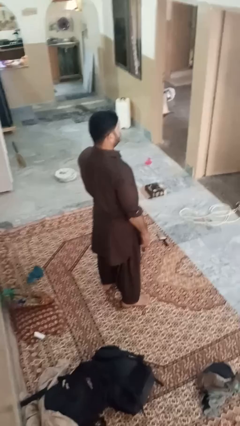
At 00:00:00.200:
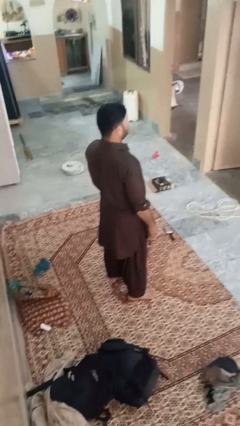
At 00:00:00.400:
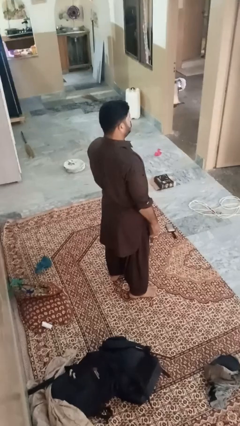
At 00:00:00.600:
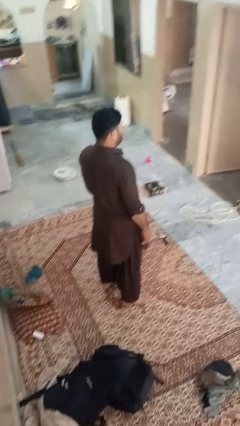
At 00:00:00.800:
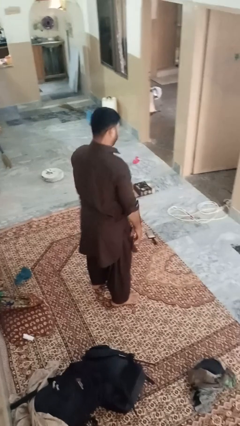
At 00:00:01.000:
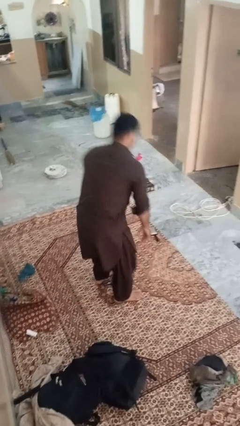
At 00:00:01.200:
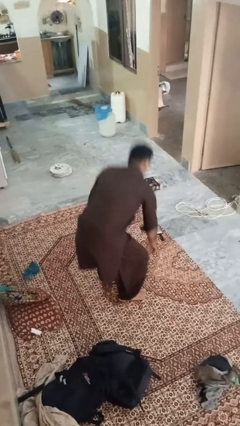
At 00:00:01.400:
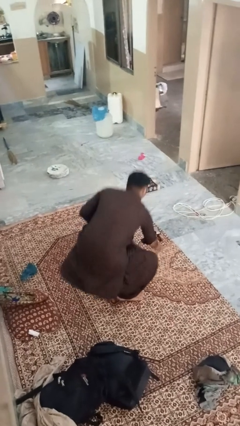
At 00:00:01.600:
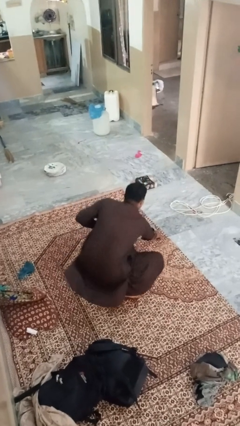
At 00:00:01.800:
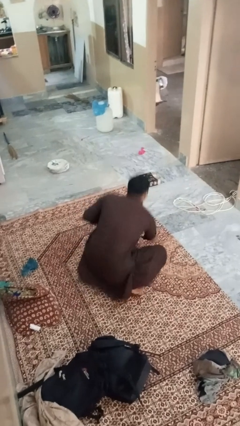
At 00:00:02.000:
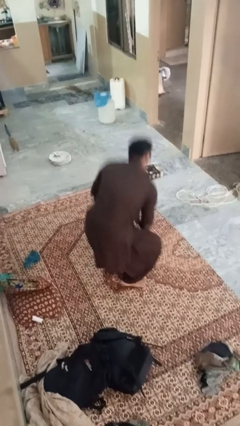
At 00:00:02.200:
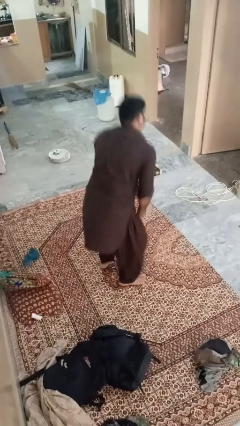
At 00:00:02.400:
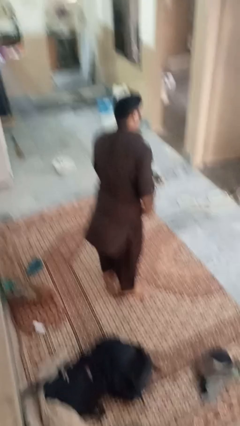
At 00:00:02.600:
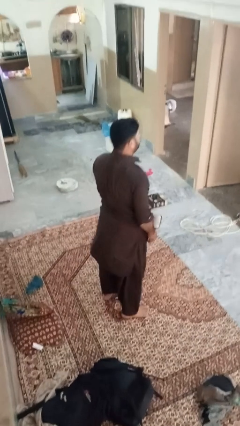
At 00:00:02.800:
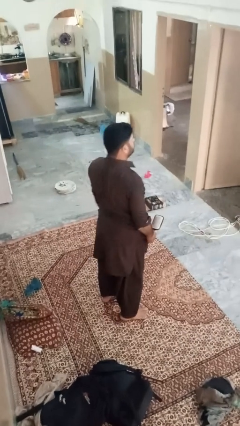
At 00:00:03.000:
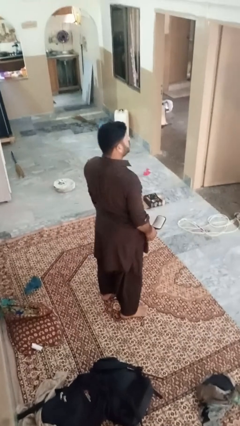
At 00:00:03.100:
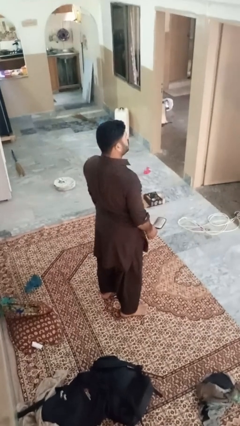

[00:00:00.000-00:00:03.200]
person picks up object from floor

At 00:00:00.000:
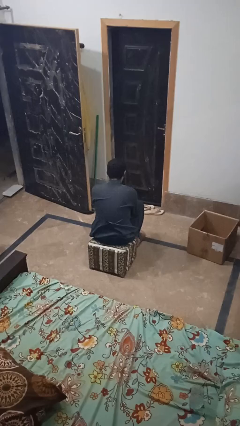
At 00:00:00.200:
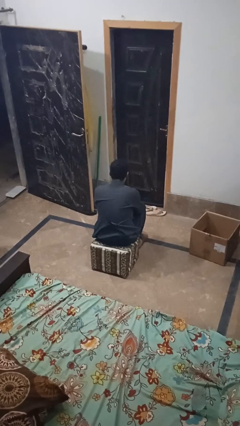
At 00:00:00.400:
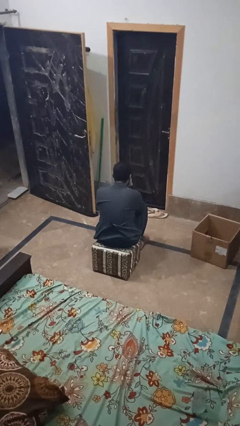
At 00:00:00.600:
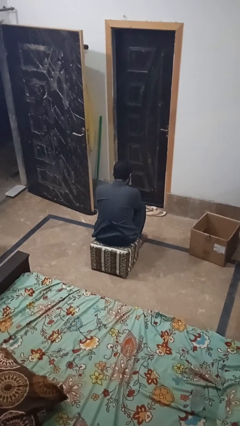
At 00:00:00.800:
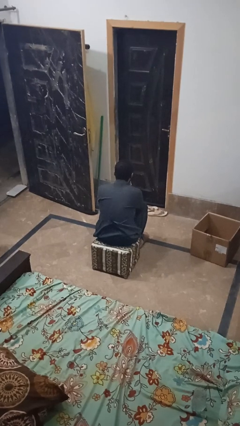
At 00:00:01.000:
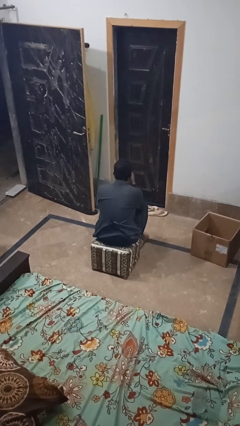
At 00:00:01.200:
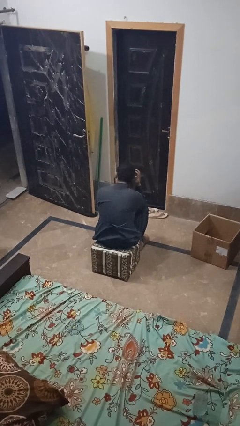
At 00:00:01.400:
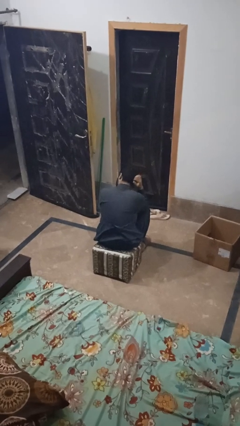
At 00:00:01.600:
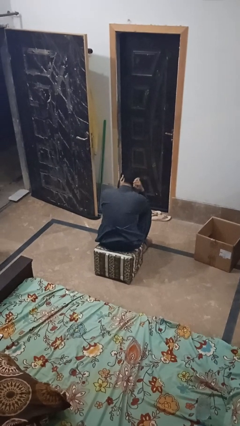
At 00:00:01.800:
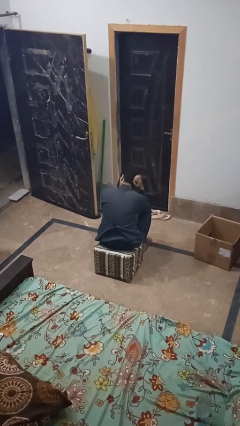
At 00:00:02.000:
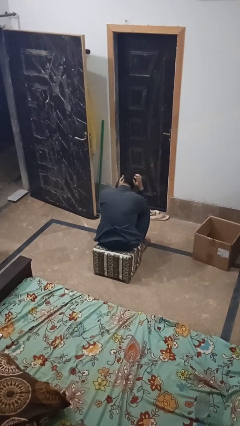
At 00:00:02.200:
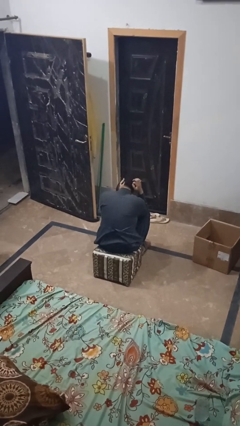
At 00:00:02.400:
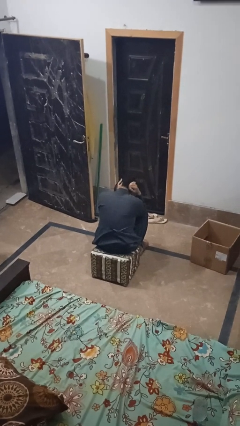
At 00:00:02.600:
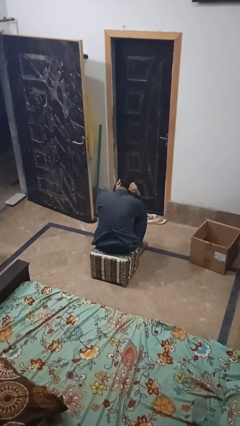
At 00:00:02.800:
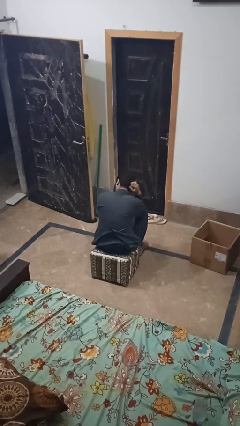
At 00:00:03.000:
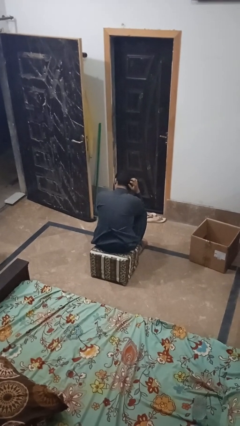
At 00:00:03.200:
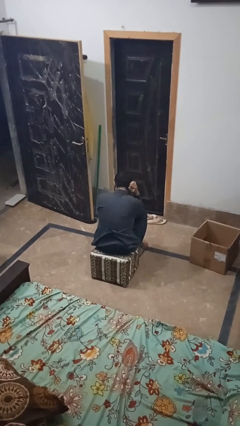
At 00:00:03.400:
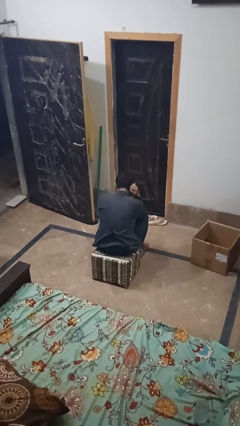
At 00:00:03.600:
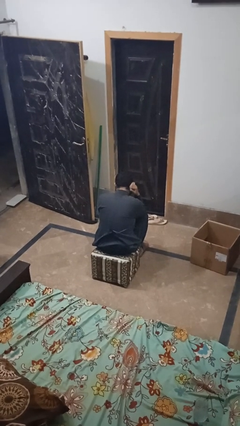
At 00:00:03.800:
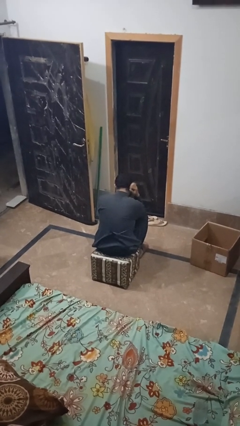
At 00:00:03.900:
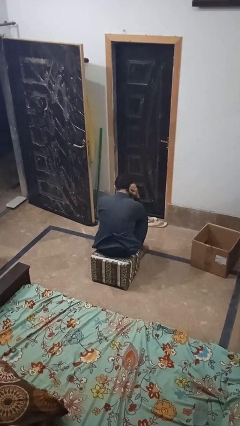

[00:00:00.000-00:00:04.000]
person strokes hair

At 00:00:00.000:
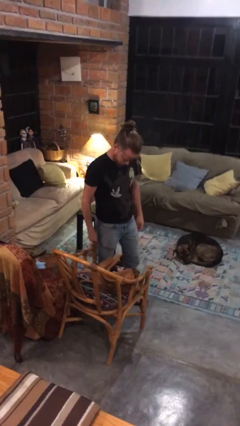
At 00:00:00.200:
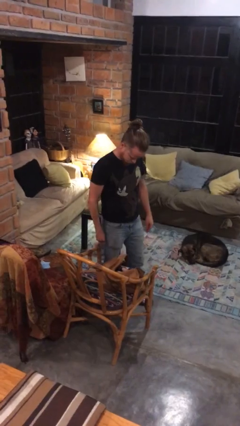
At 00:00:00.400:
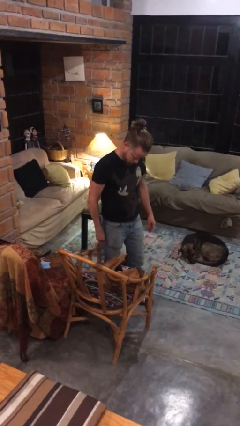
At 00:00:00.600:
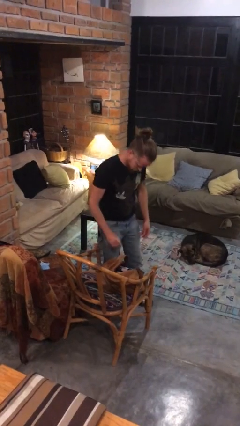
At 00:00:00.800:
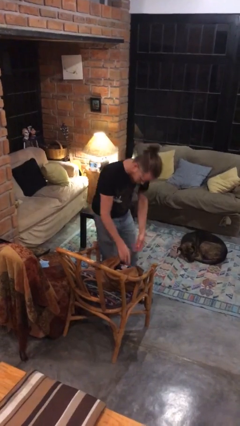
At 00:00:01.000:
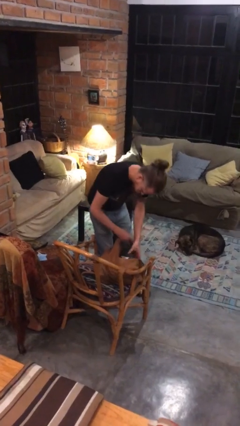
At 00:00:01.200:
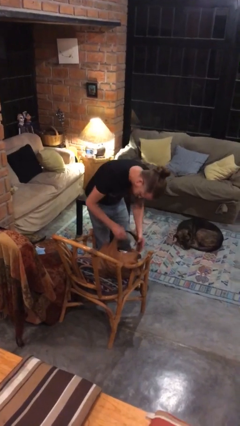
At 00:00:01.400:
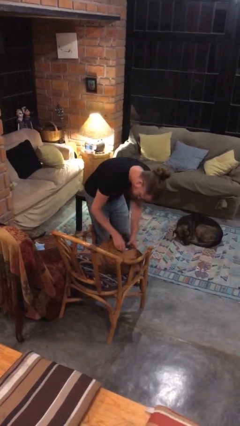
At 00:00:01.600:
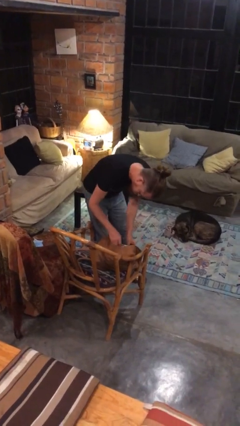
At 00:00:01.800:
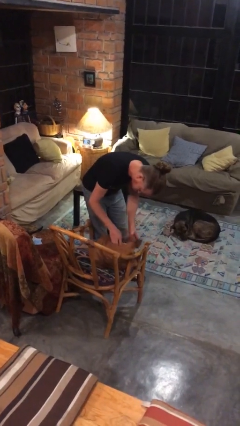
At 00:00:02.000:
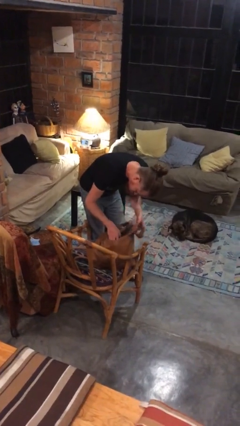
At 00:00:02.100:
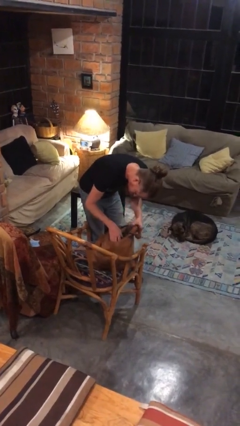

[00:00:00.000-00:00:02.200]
person searches in purse

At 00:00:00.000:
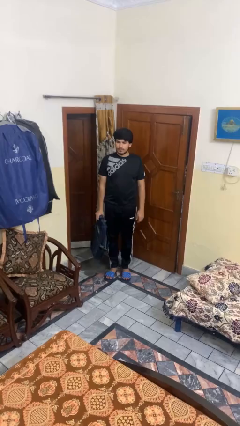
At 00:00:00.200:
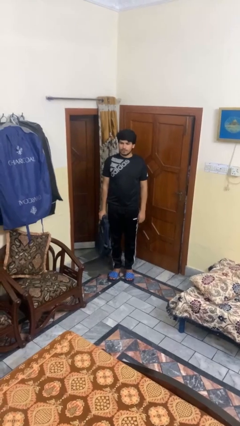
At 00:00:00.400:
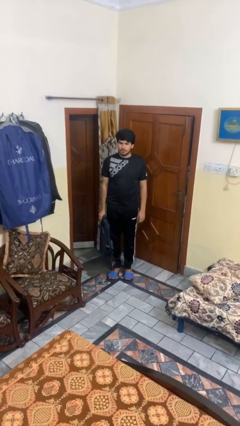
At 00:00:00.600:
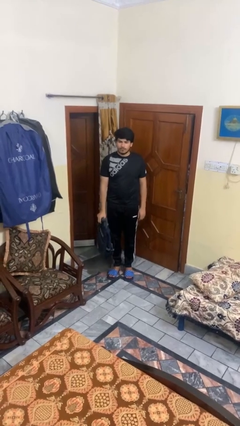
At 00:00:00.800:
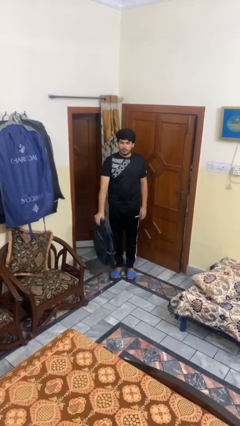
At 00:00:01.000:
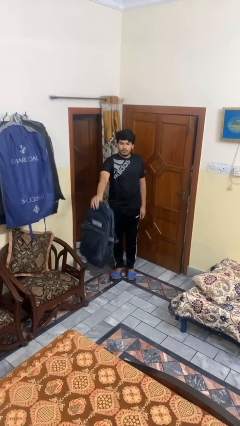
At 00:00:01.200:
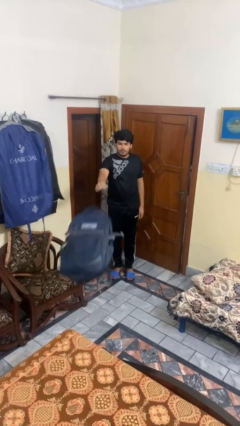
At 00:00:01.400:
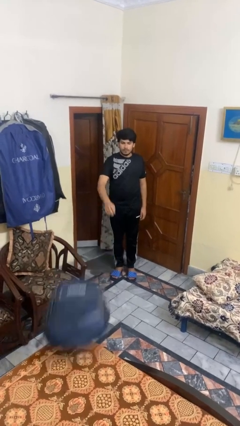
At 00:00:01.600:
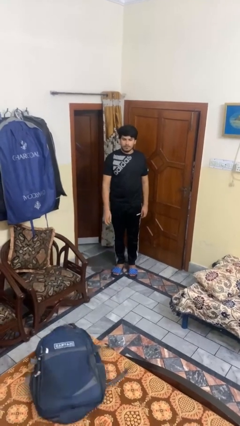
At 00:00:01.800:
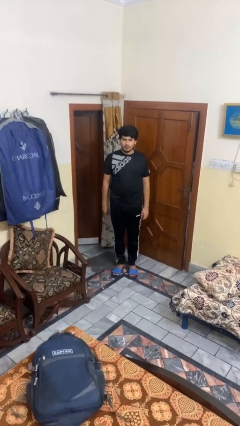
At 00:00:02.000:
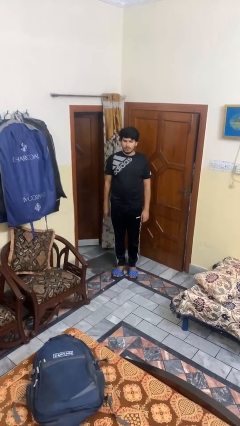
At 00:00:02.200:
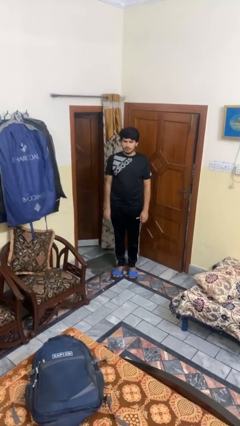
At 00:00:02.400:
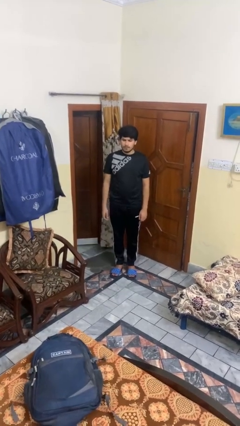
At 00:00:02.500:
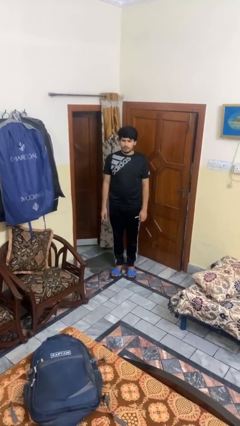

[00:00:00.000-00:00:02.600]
person throws object on bed

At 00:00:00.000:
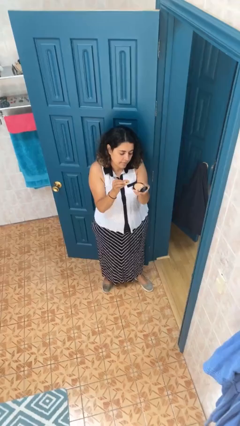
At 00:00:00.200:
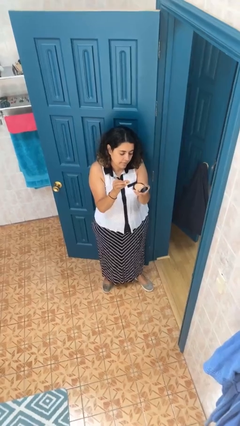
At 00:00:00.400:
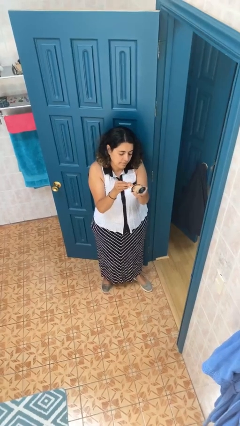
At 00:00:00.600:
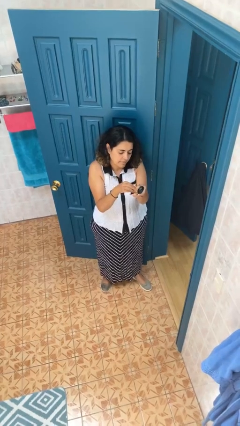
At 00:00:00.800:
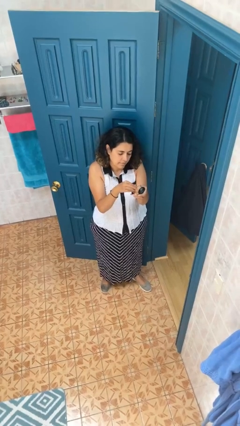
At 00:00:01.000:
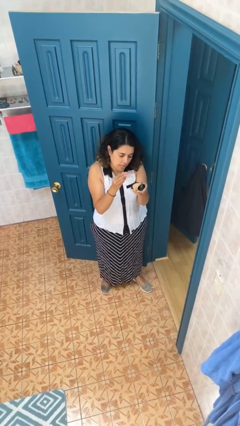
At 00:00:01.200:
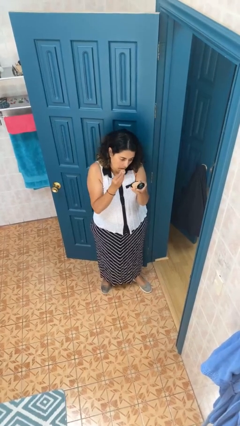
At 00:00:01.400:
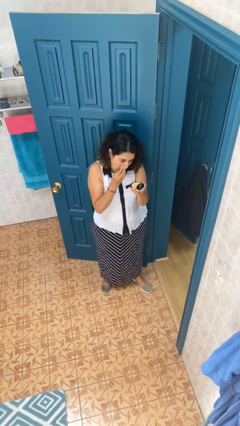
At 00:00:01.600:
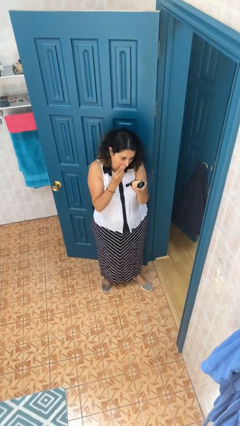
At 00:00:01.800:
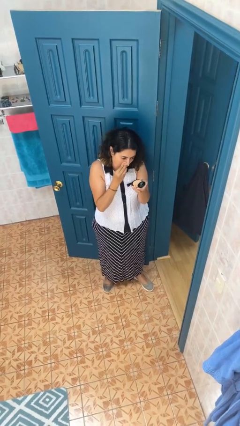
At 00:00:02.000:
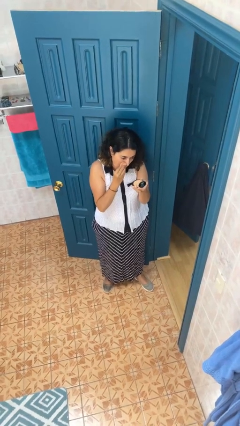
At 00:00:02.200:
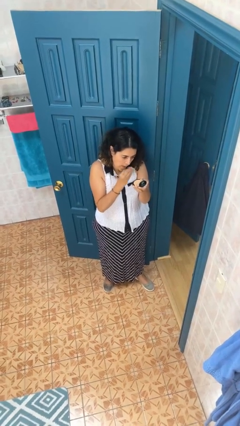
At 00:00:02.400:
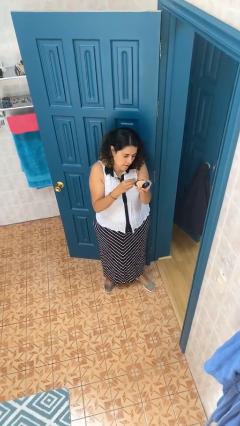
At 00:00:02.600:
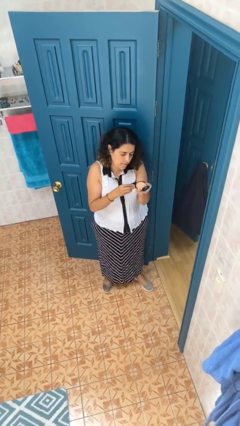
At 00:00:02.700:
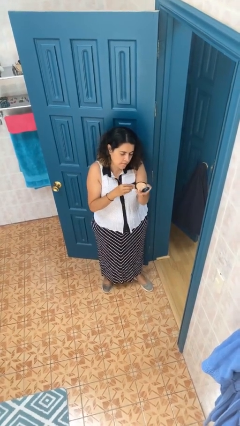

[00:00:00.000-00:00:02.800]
person applies foundation makeup

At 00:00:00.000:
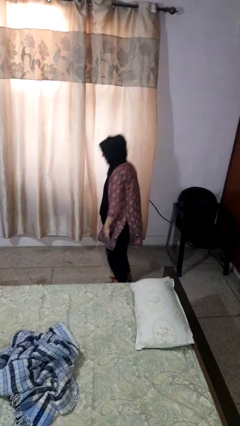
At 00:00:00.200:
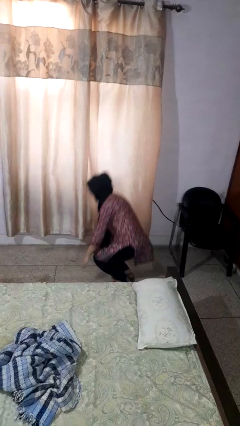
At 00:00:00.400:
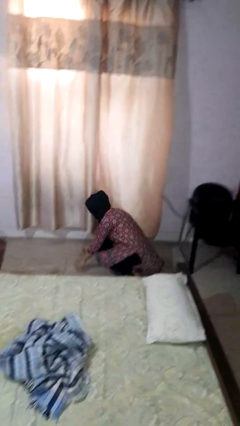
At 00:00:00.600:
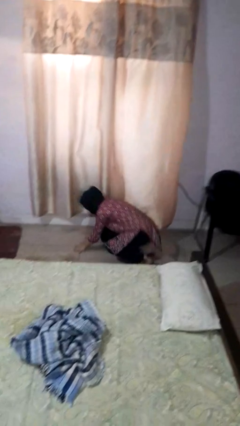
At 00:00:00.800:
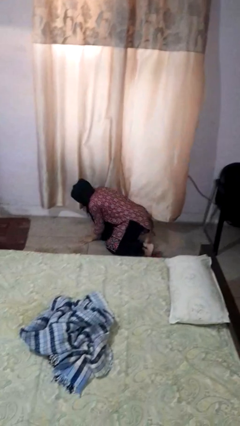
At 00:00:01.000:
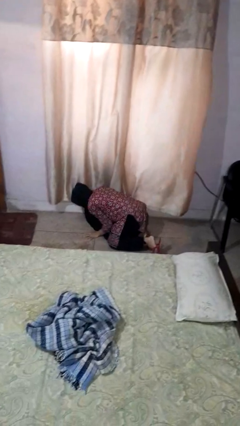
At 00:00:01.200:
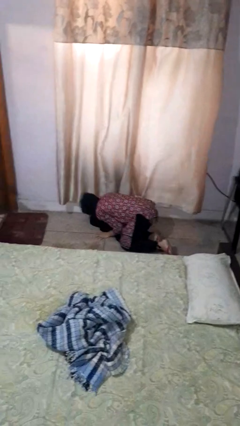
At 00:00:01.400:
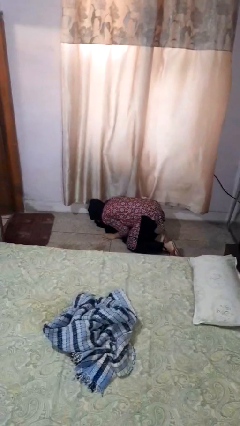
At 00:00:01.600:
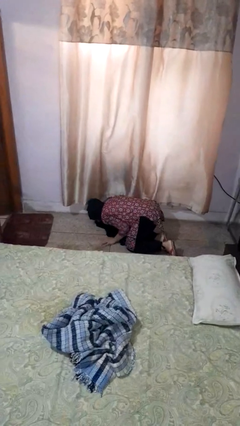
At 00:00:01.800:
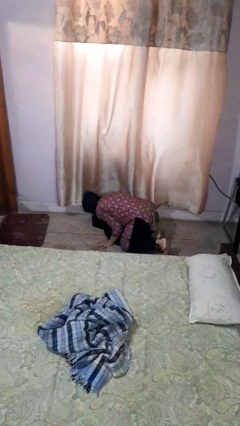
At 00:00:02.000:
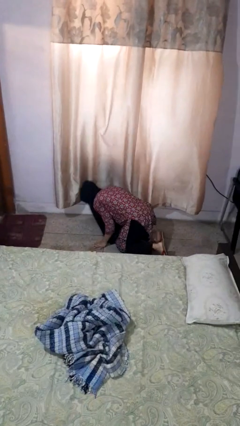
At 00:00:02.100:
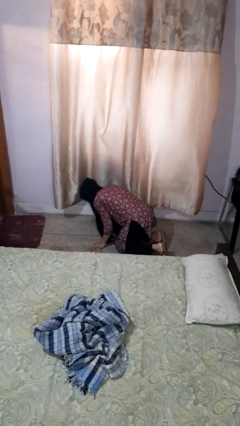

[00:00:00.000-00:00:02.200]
person falls while standing
